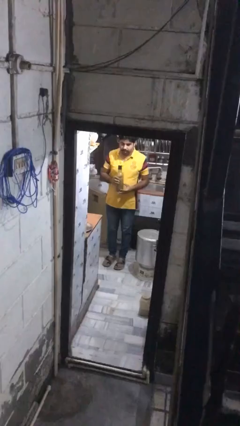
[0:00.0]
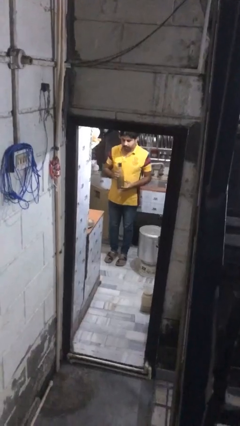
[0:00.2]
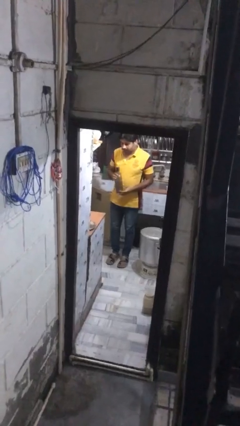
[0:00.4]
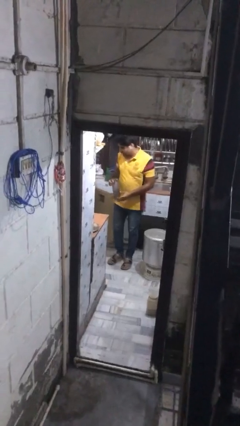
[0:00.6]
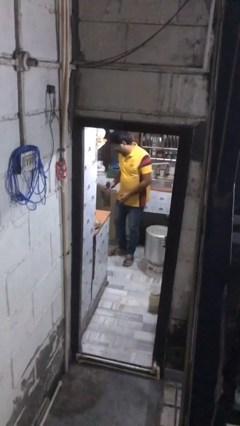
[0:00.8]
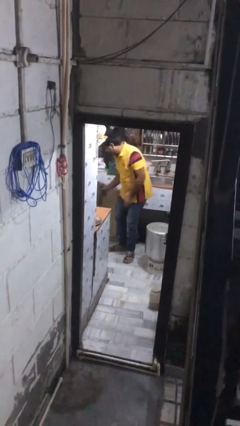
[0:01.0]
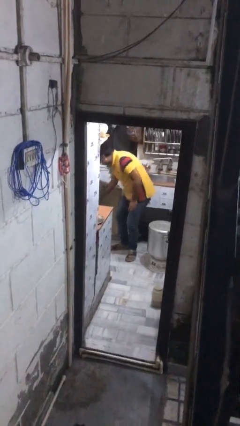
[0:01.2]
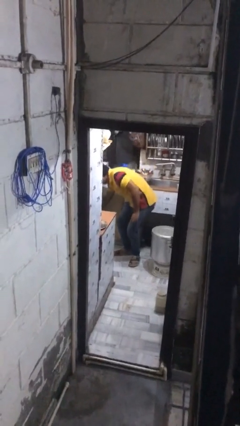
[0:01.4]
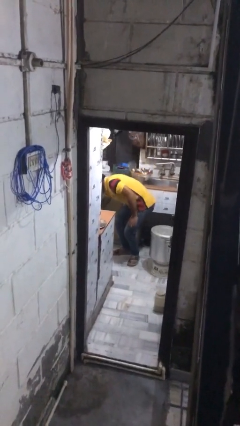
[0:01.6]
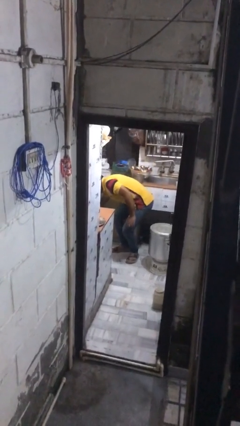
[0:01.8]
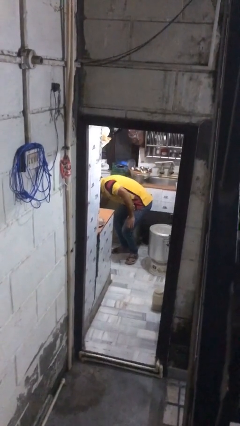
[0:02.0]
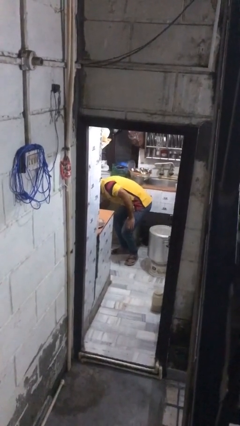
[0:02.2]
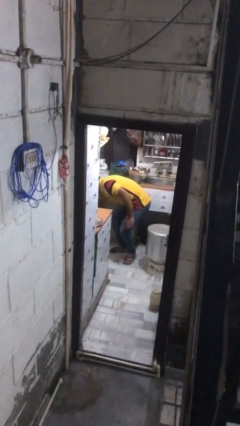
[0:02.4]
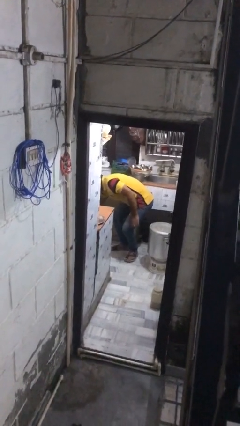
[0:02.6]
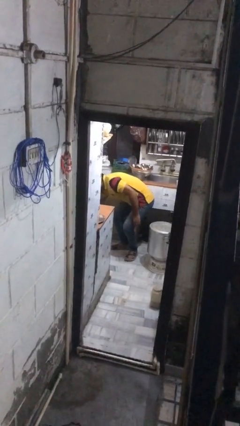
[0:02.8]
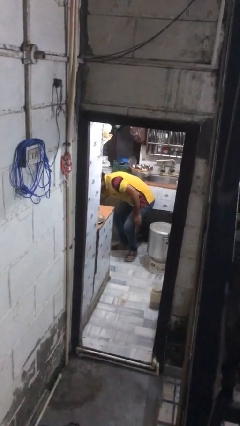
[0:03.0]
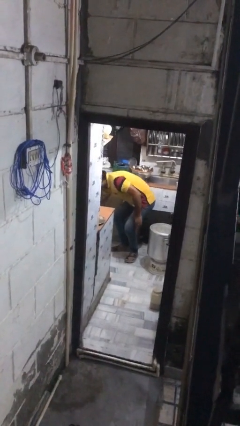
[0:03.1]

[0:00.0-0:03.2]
person puts object into kitchen drawer

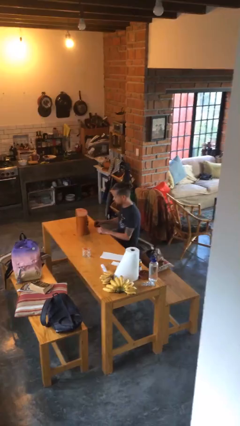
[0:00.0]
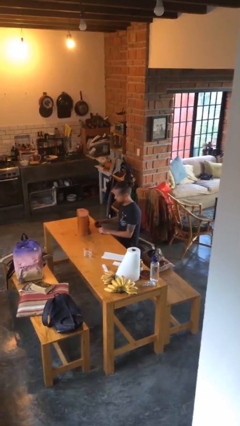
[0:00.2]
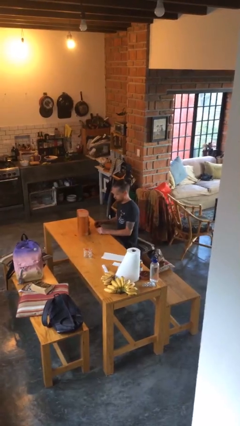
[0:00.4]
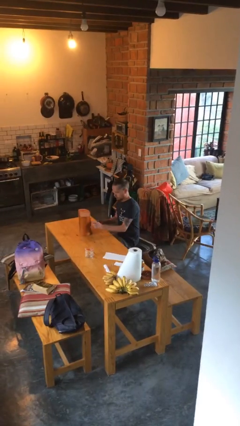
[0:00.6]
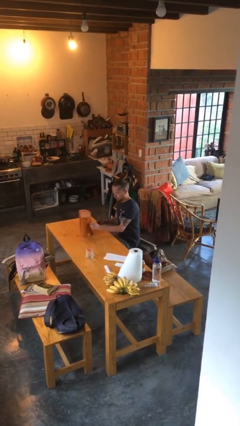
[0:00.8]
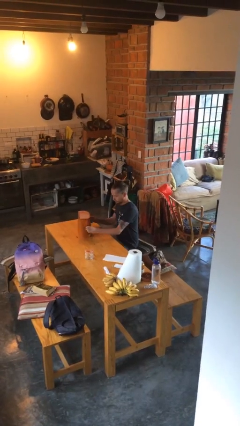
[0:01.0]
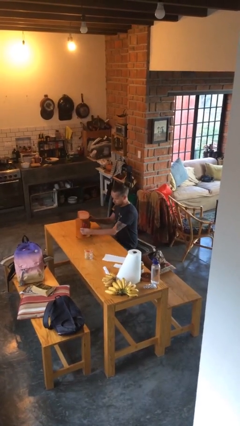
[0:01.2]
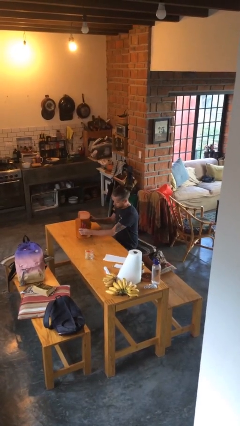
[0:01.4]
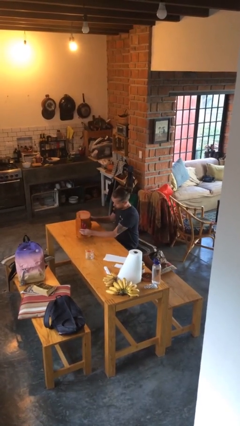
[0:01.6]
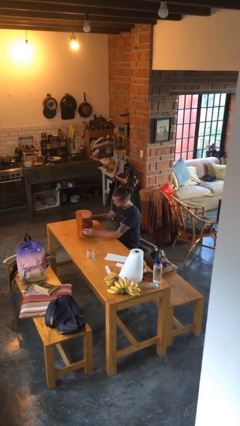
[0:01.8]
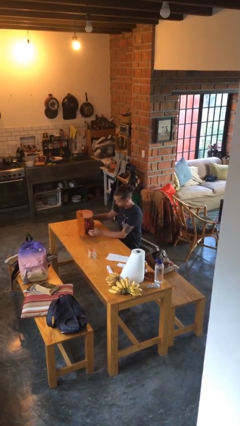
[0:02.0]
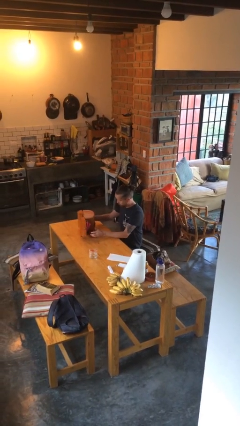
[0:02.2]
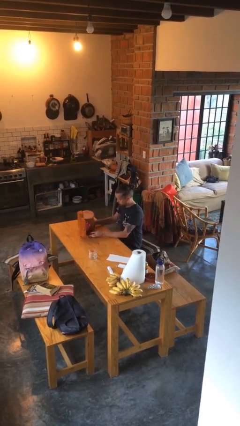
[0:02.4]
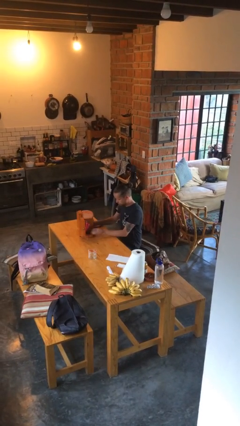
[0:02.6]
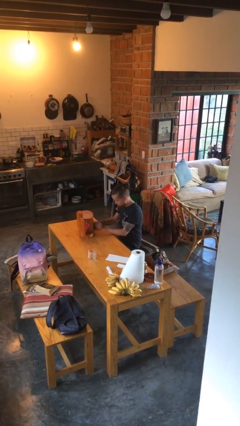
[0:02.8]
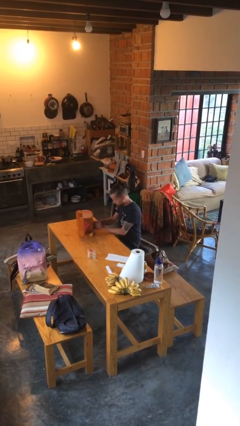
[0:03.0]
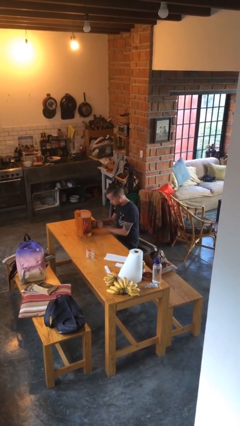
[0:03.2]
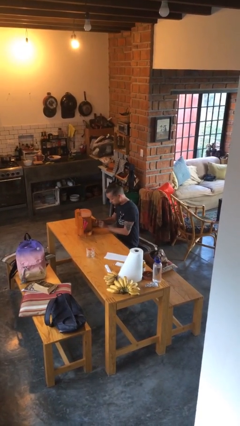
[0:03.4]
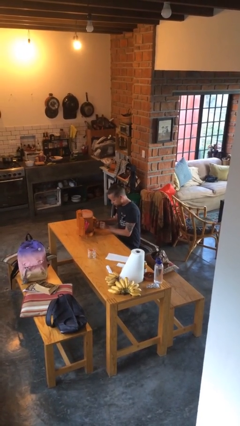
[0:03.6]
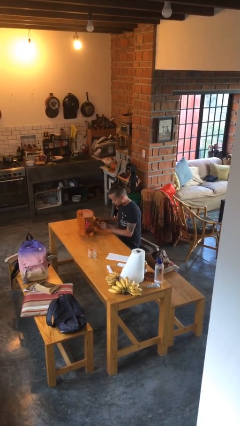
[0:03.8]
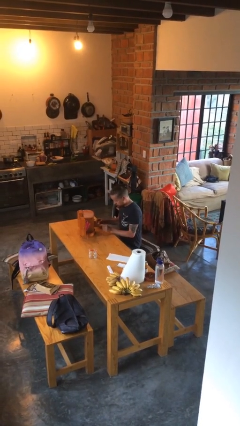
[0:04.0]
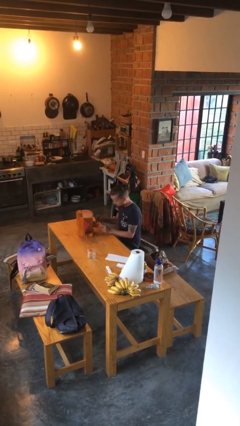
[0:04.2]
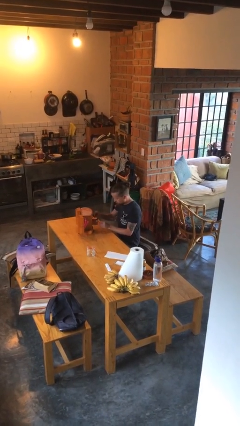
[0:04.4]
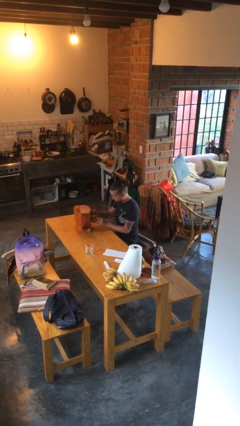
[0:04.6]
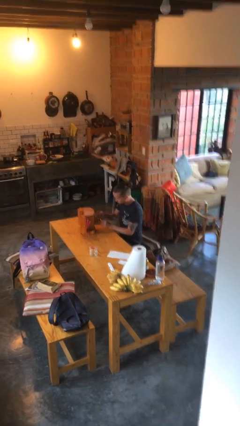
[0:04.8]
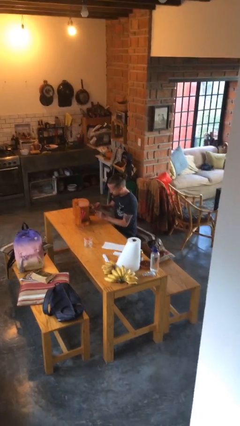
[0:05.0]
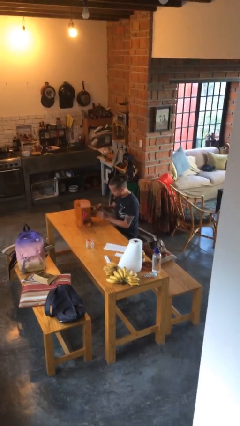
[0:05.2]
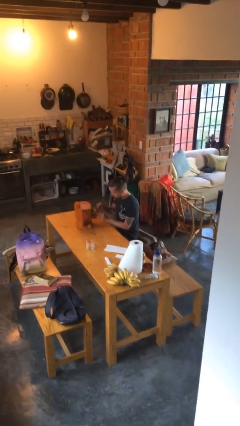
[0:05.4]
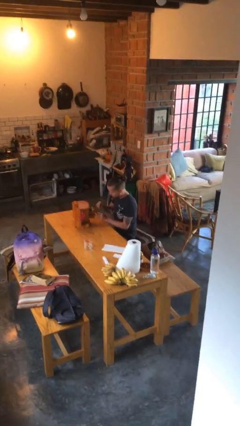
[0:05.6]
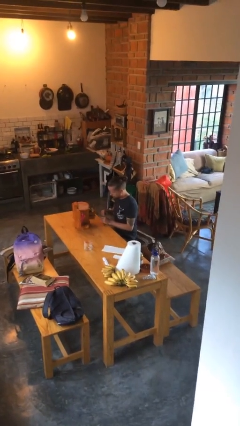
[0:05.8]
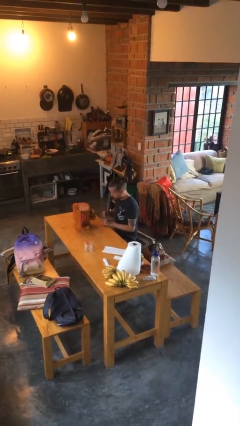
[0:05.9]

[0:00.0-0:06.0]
person opens jewelry box

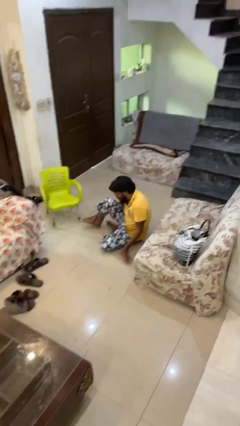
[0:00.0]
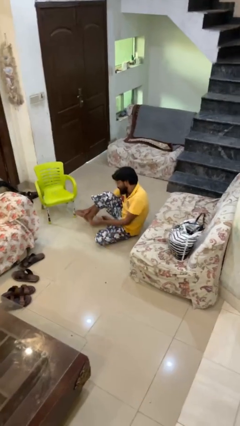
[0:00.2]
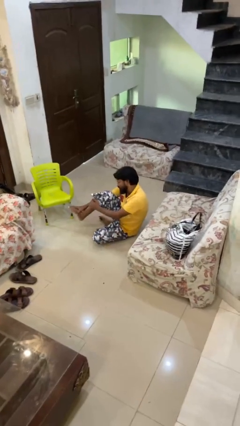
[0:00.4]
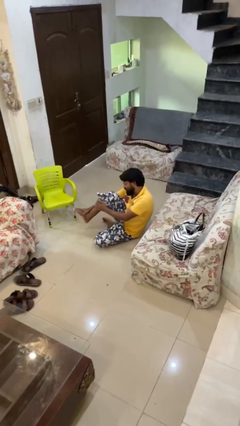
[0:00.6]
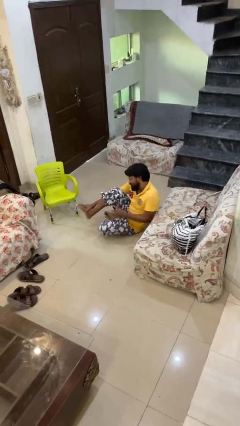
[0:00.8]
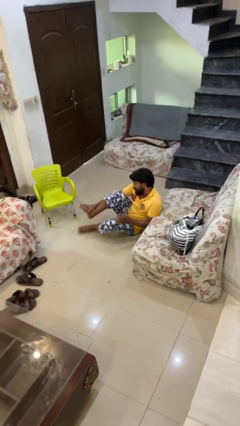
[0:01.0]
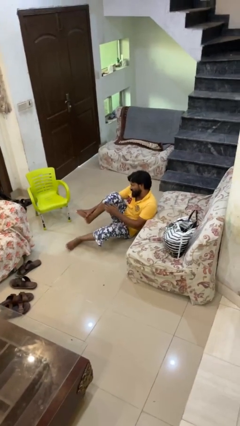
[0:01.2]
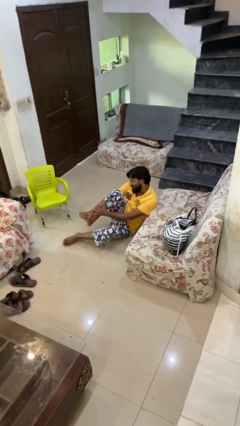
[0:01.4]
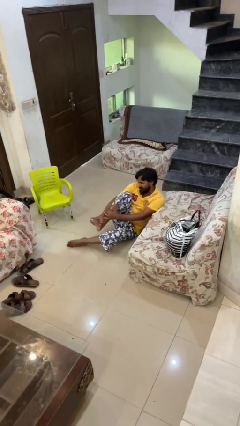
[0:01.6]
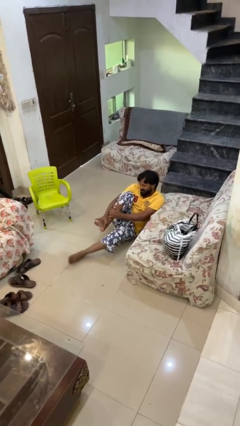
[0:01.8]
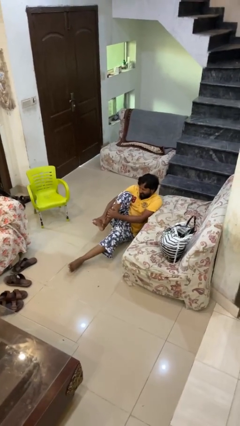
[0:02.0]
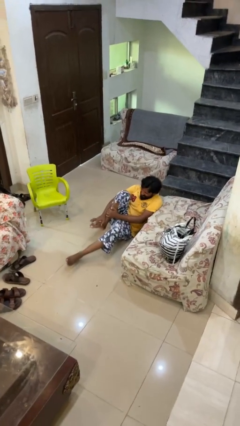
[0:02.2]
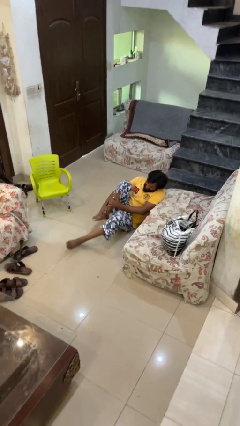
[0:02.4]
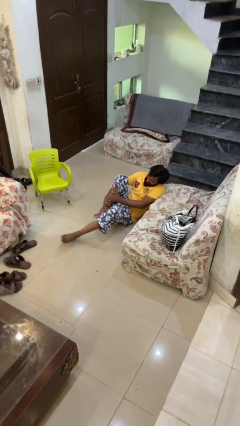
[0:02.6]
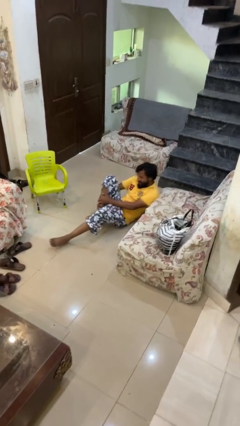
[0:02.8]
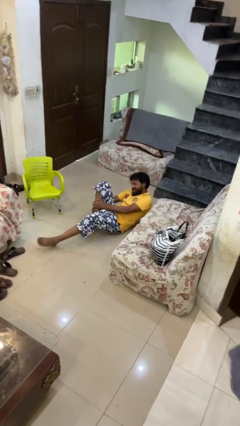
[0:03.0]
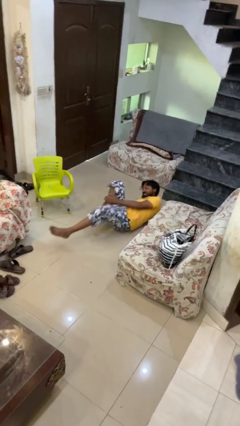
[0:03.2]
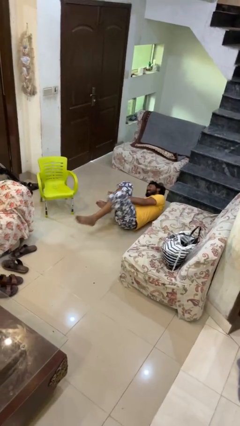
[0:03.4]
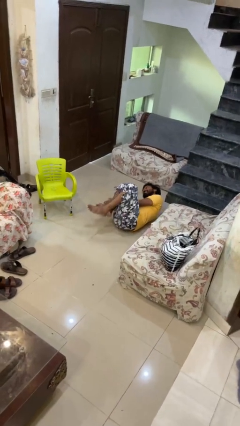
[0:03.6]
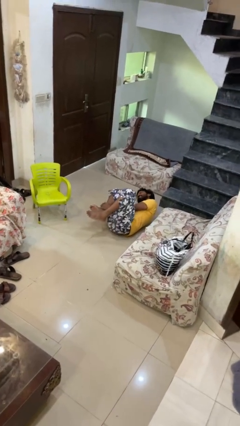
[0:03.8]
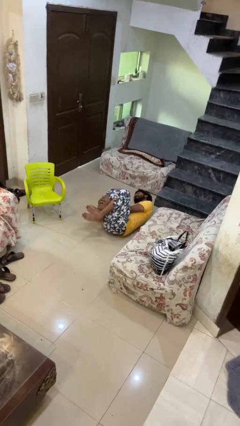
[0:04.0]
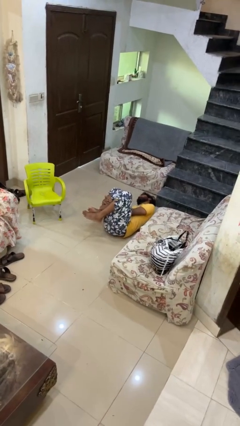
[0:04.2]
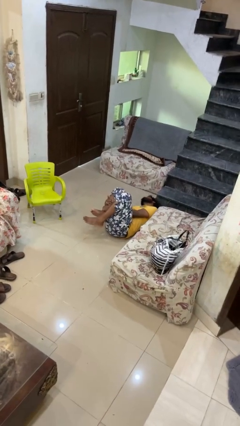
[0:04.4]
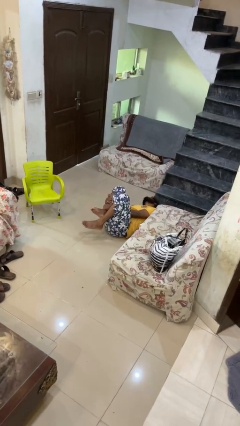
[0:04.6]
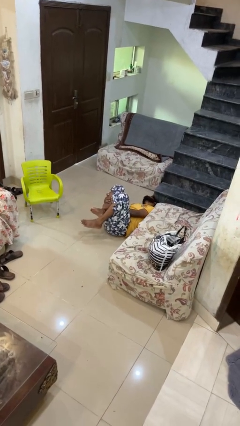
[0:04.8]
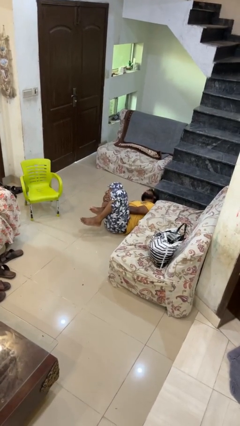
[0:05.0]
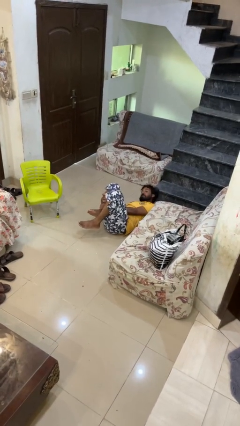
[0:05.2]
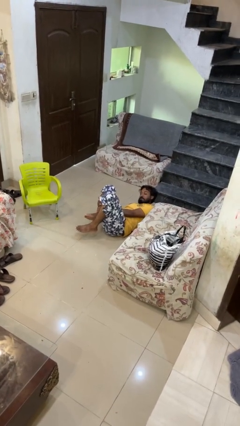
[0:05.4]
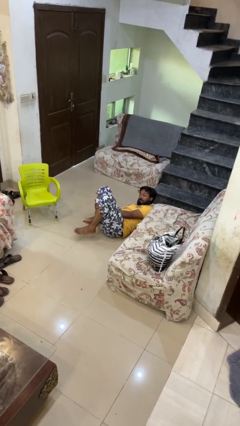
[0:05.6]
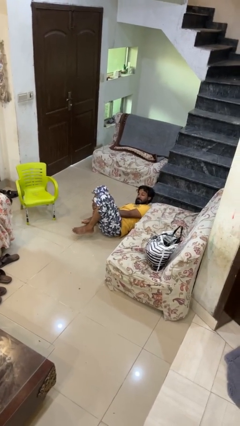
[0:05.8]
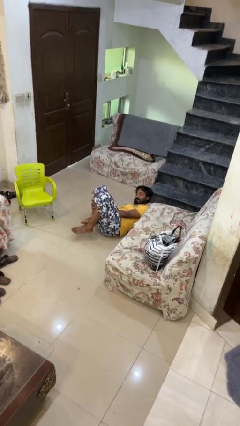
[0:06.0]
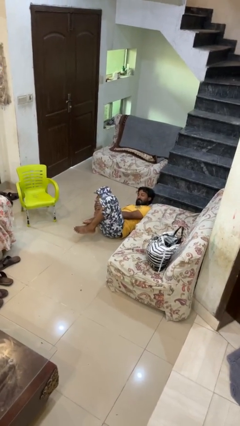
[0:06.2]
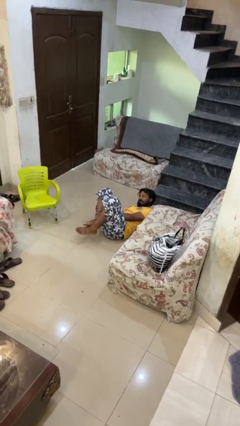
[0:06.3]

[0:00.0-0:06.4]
person lies down on floor

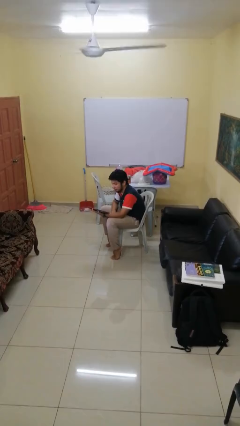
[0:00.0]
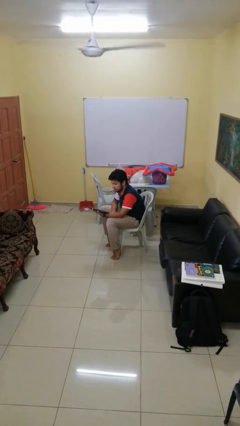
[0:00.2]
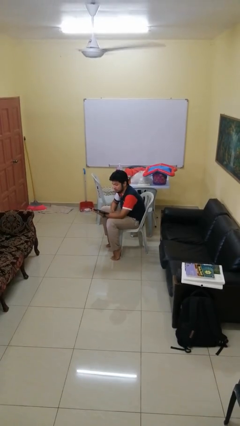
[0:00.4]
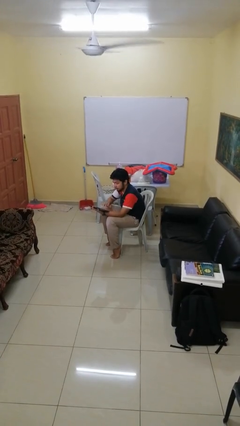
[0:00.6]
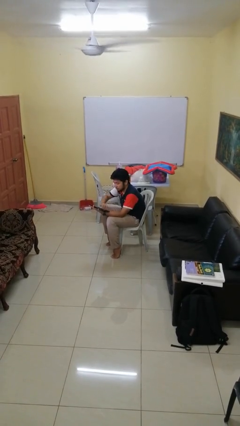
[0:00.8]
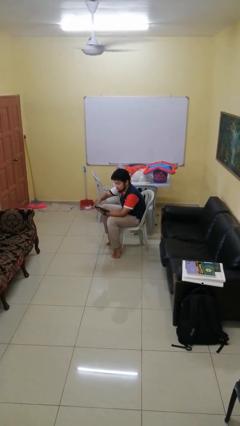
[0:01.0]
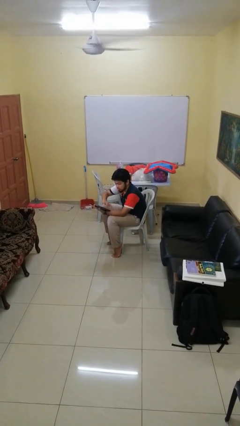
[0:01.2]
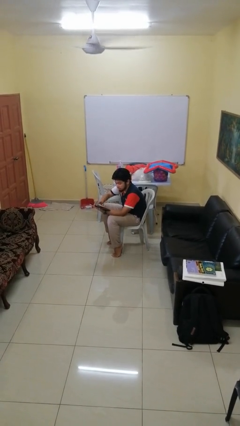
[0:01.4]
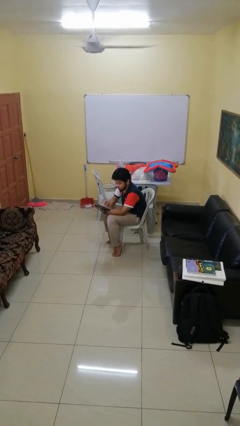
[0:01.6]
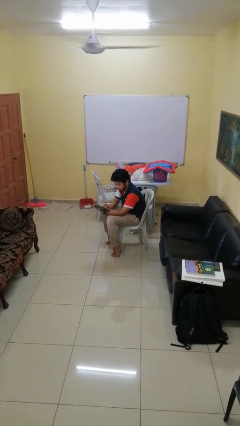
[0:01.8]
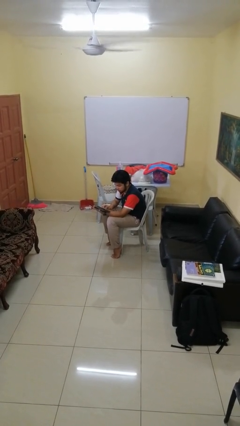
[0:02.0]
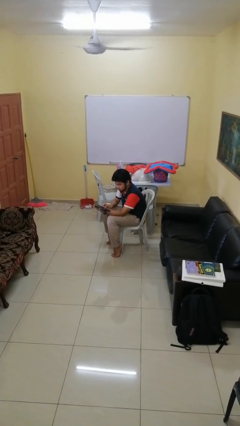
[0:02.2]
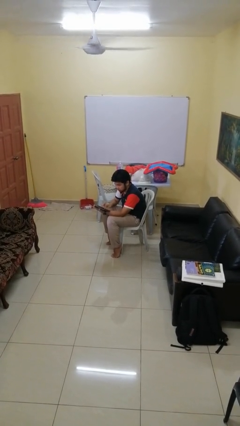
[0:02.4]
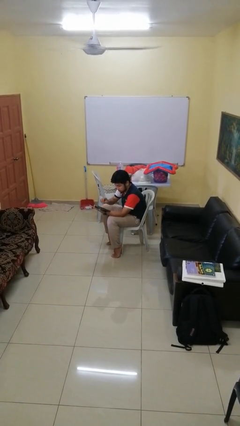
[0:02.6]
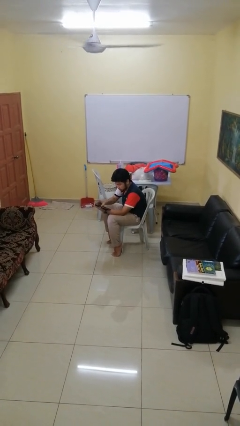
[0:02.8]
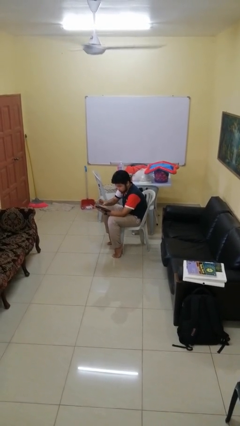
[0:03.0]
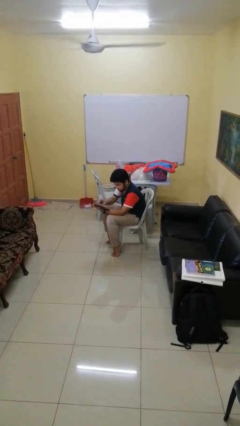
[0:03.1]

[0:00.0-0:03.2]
person interacts with tablet
